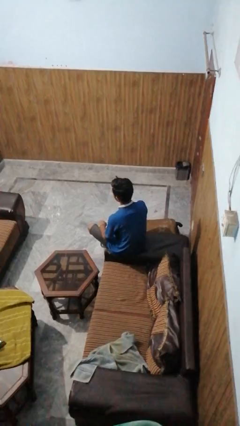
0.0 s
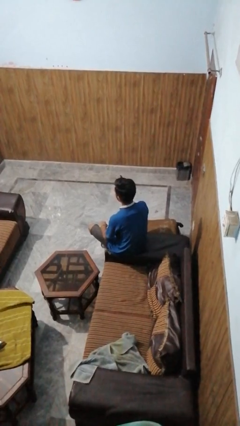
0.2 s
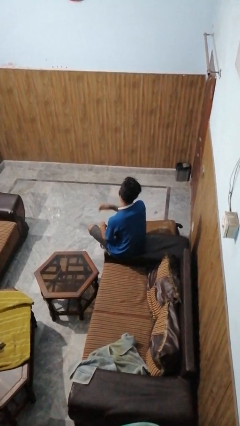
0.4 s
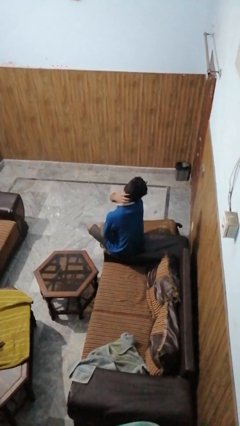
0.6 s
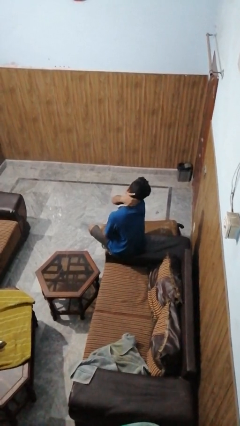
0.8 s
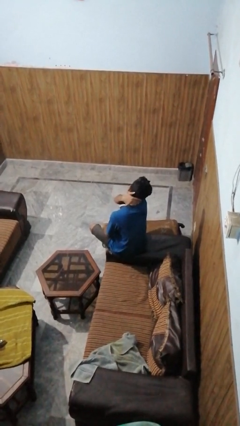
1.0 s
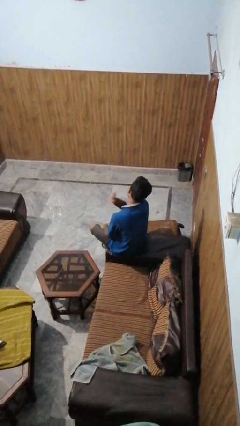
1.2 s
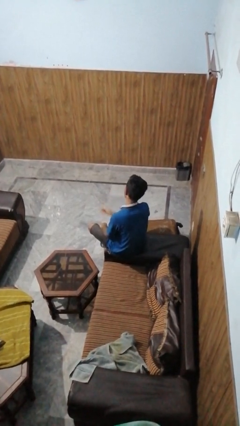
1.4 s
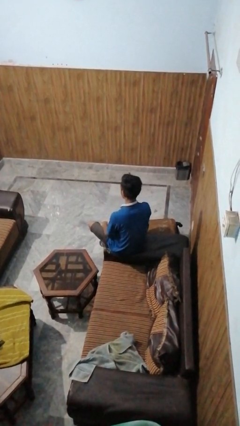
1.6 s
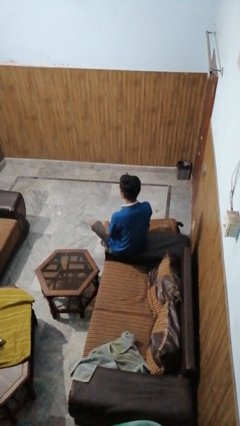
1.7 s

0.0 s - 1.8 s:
person swats bug

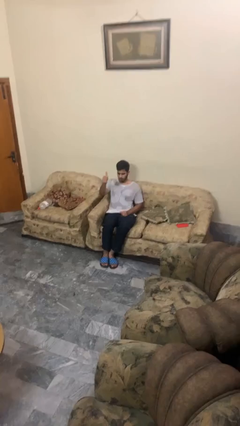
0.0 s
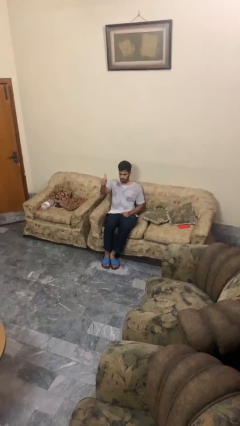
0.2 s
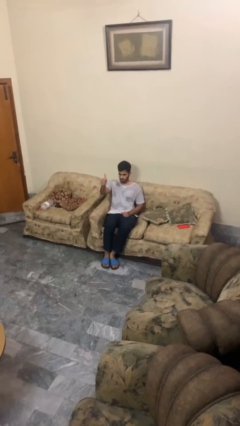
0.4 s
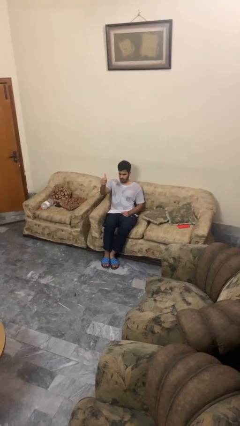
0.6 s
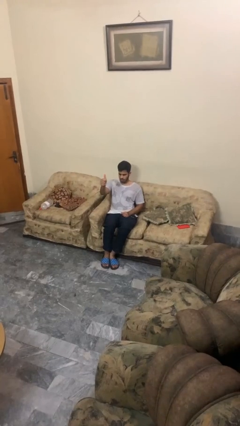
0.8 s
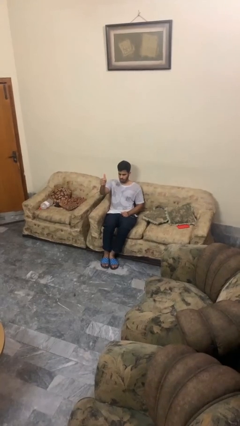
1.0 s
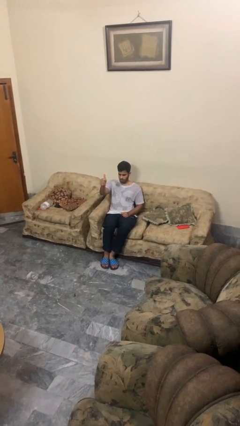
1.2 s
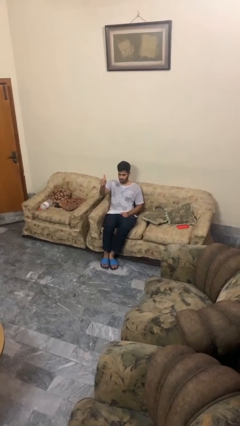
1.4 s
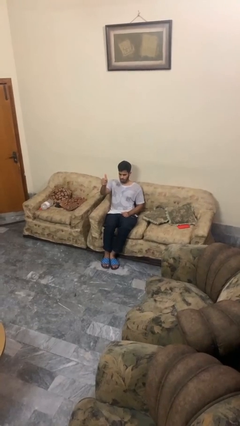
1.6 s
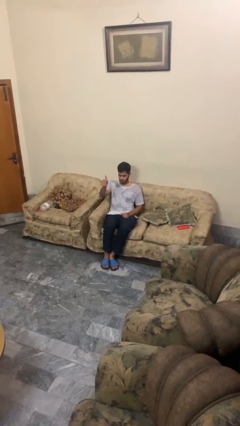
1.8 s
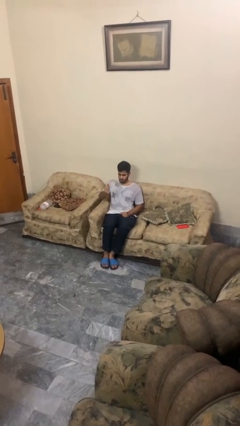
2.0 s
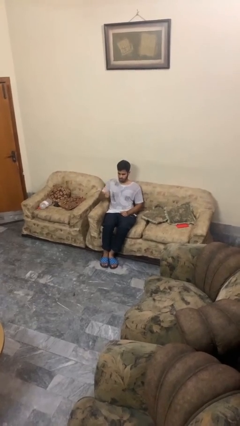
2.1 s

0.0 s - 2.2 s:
person gestures thumbs up

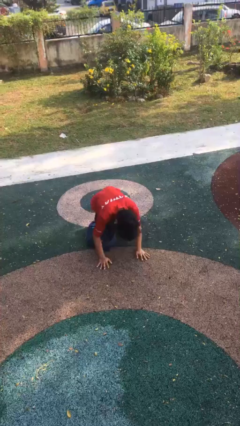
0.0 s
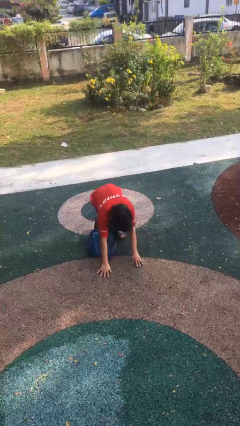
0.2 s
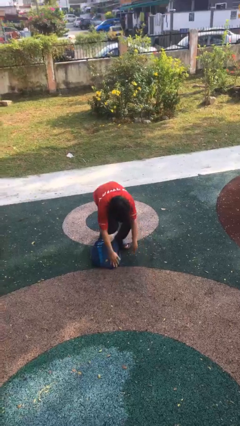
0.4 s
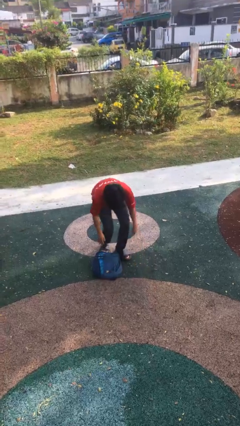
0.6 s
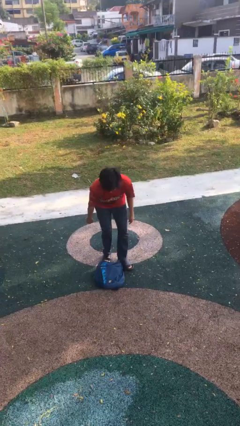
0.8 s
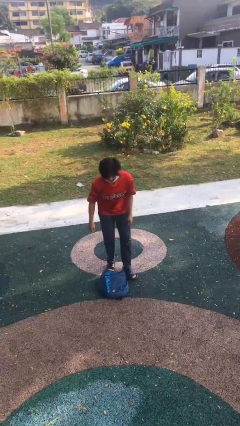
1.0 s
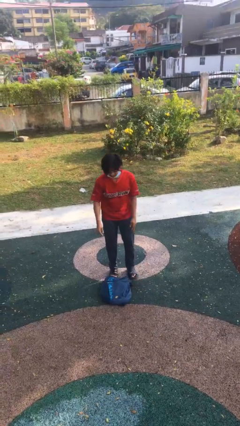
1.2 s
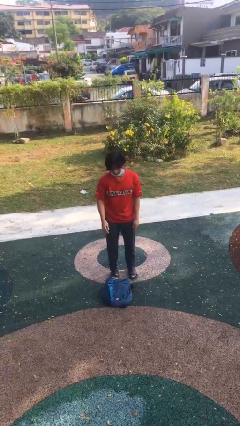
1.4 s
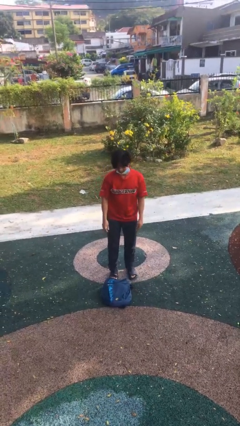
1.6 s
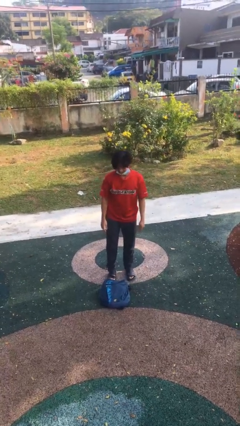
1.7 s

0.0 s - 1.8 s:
person stands up from floor

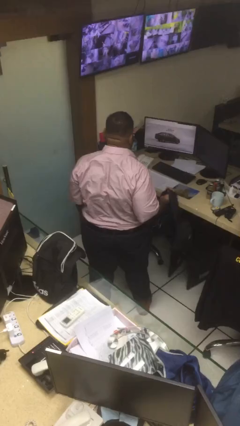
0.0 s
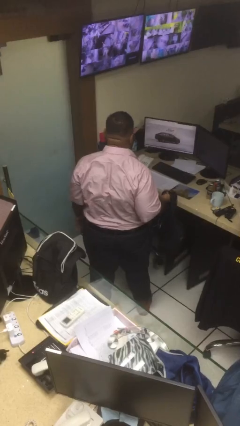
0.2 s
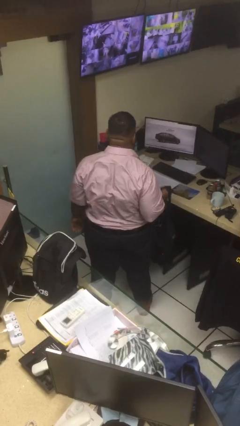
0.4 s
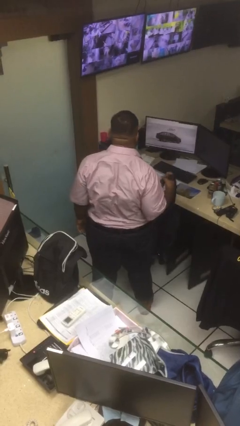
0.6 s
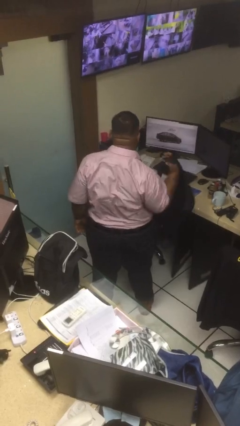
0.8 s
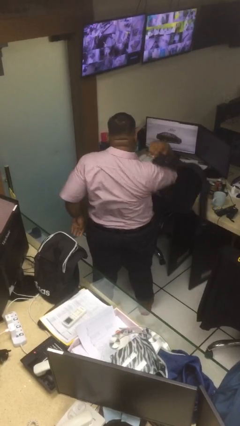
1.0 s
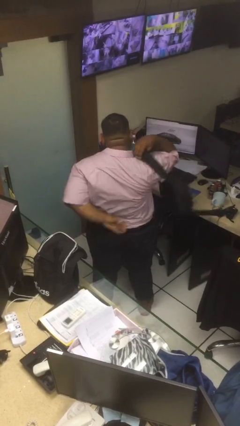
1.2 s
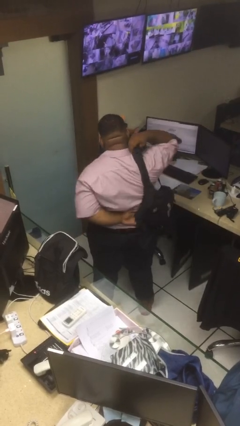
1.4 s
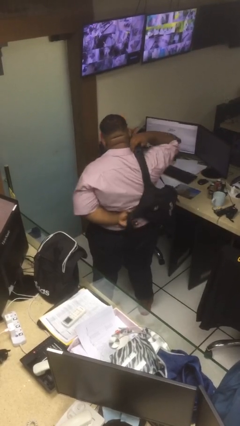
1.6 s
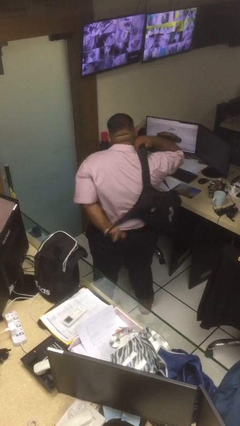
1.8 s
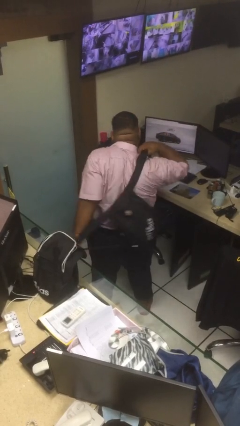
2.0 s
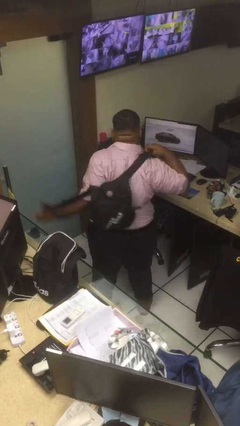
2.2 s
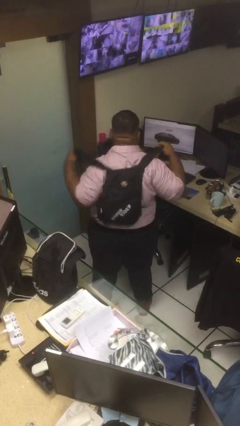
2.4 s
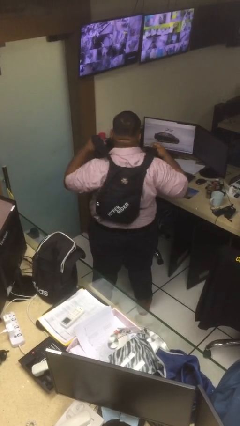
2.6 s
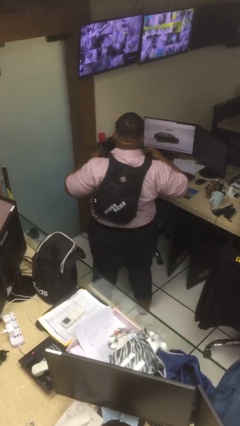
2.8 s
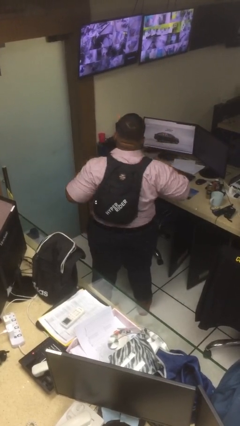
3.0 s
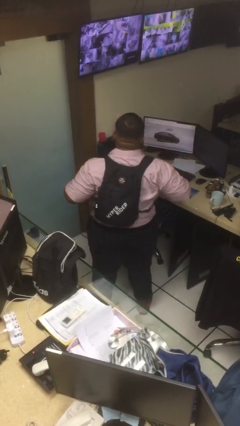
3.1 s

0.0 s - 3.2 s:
person puts on backpack

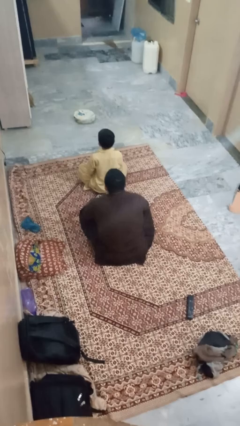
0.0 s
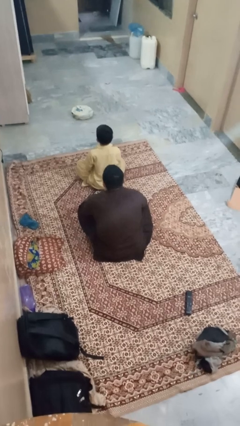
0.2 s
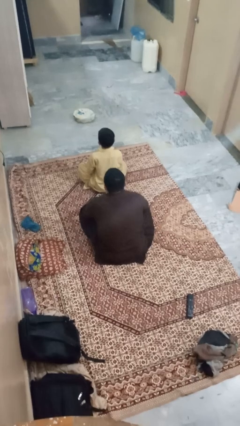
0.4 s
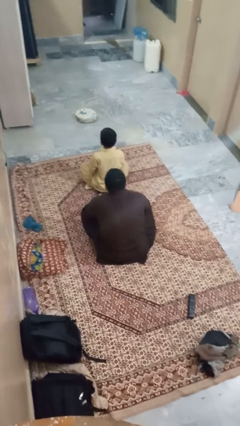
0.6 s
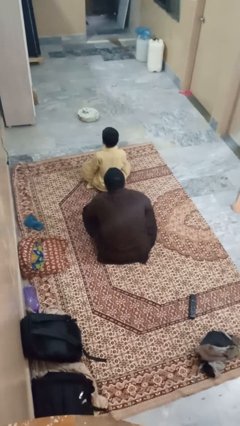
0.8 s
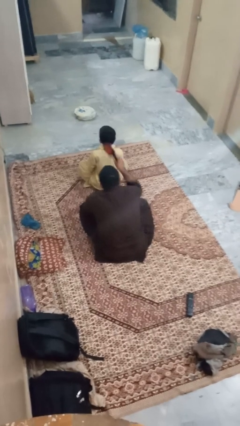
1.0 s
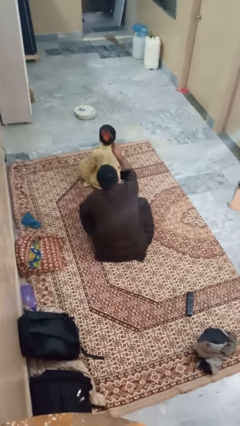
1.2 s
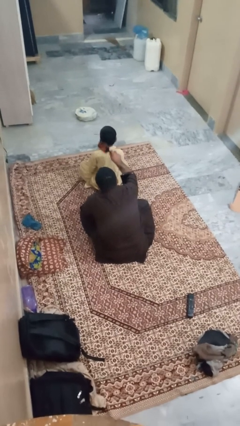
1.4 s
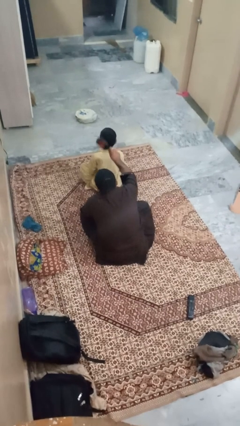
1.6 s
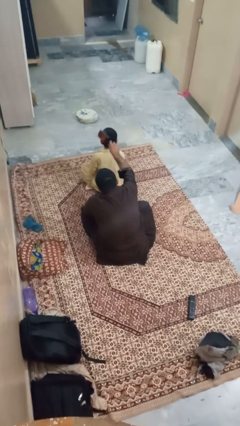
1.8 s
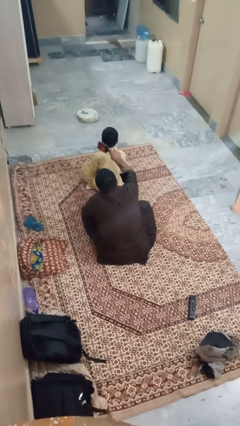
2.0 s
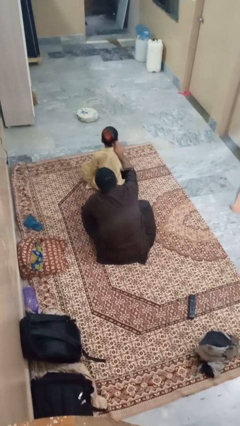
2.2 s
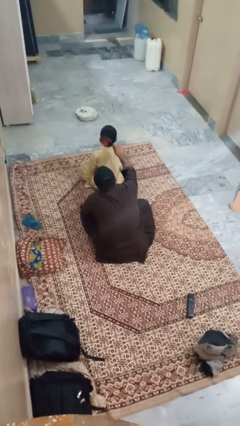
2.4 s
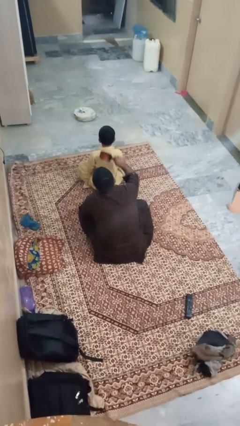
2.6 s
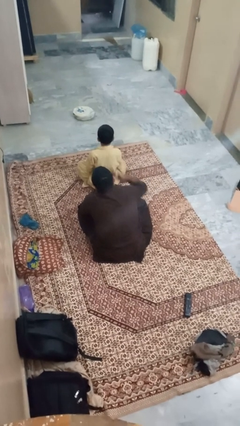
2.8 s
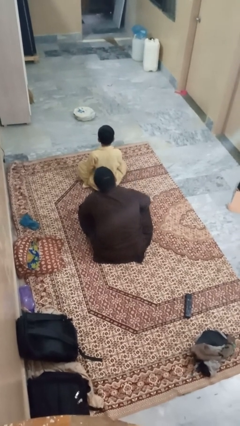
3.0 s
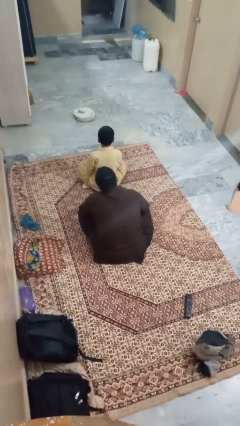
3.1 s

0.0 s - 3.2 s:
person brushes hair of person

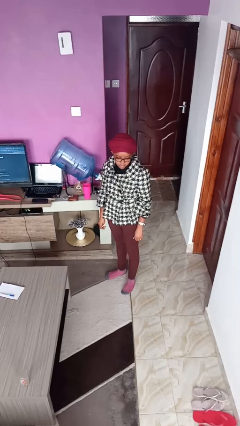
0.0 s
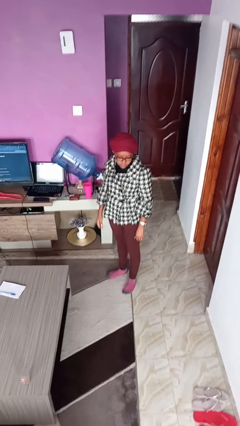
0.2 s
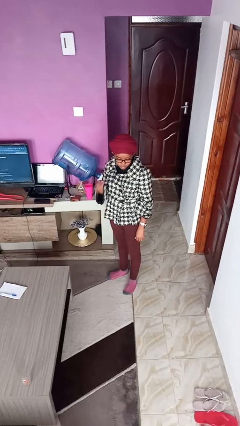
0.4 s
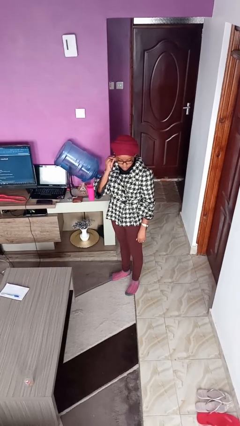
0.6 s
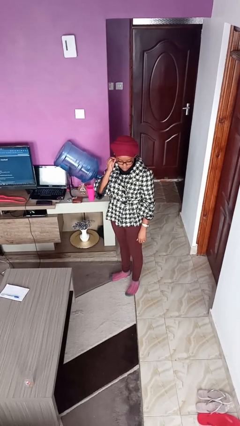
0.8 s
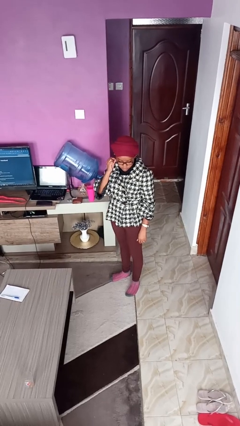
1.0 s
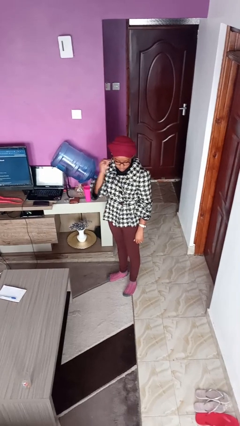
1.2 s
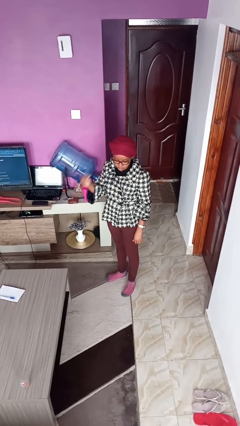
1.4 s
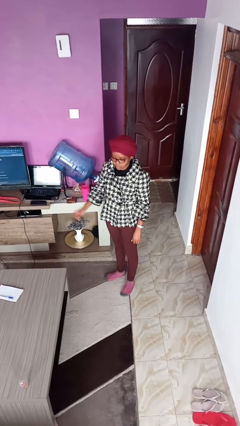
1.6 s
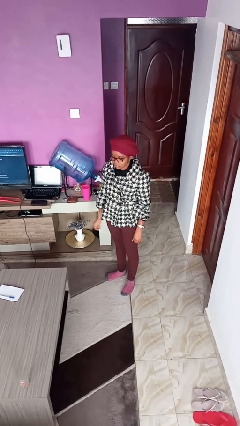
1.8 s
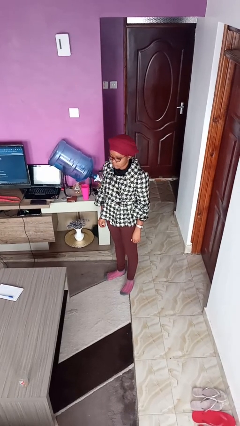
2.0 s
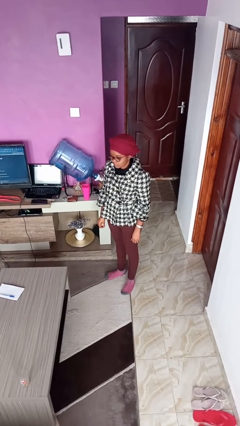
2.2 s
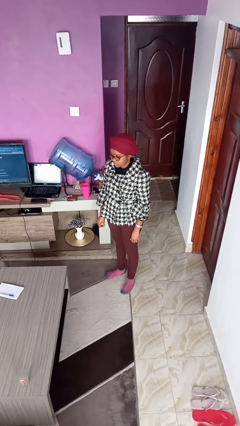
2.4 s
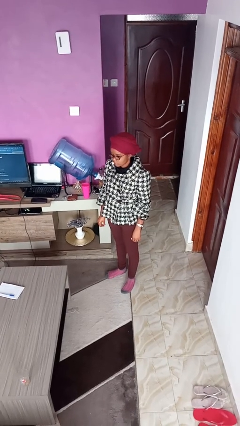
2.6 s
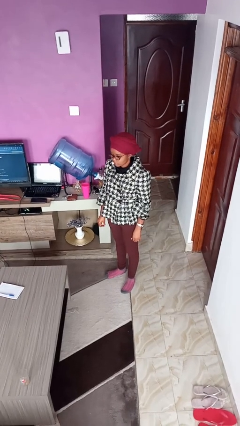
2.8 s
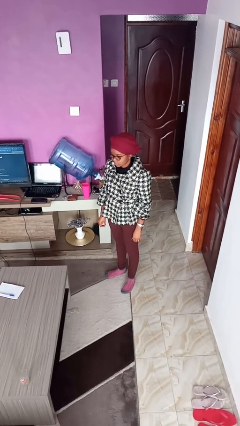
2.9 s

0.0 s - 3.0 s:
person takes off earrings

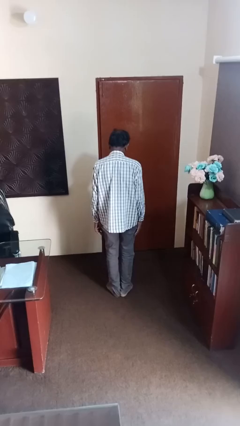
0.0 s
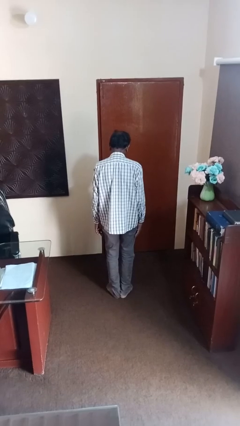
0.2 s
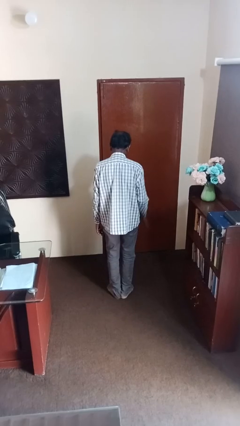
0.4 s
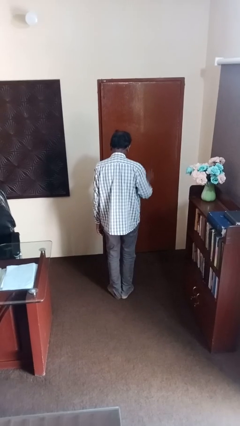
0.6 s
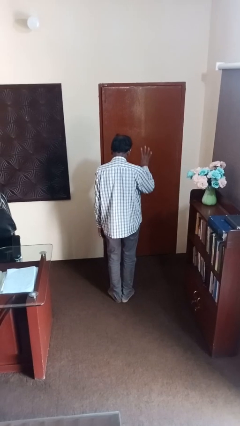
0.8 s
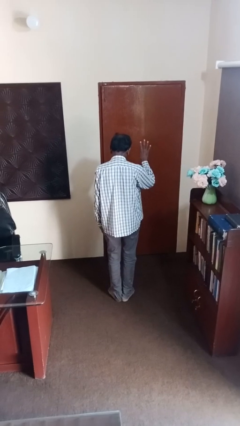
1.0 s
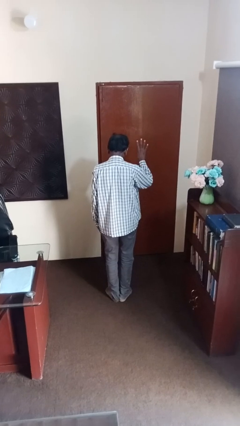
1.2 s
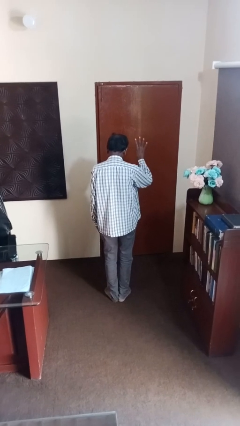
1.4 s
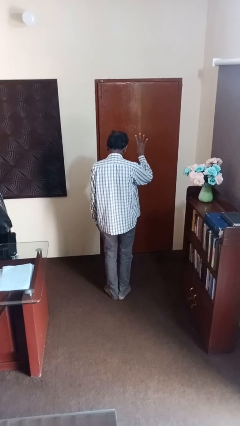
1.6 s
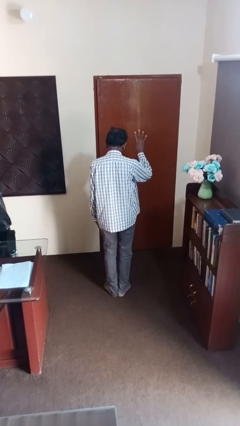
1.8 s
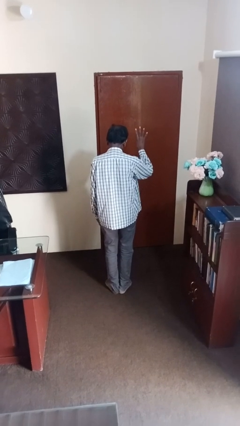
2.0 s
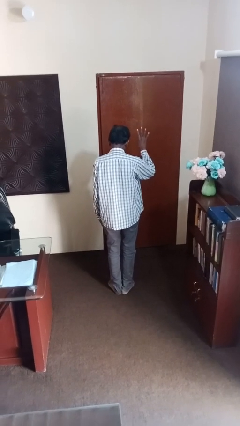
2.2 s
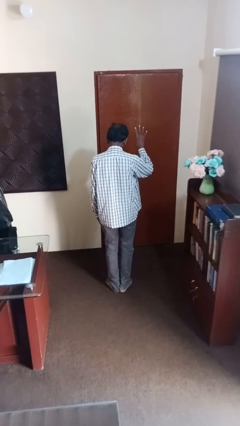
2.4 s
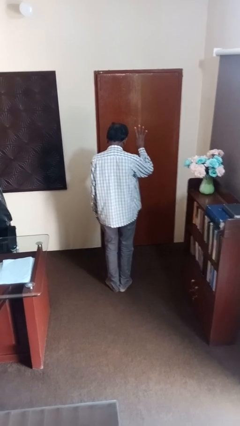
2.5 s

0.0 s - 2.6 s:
person gestures number four
